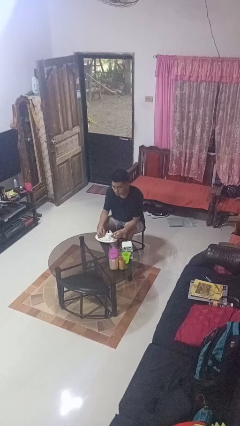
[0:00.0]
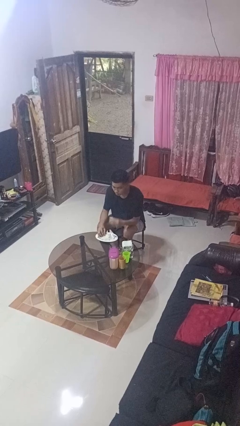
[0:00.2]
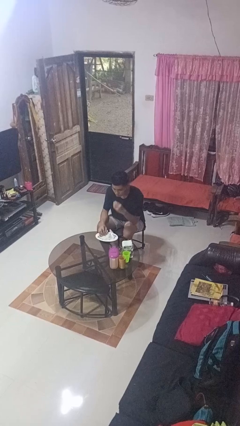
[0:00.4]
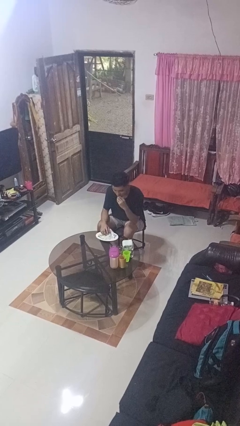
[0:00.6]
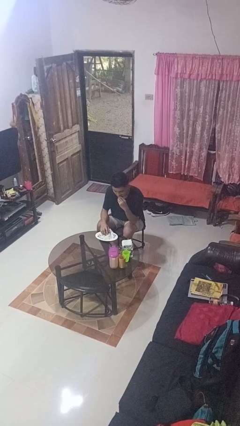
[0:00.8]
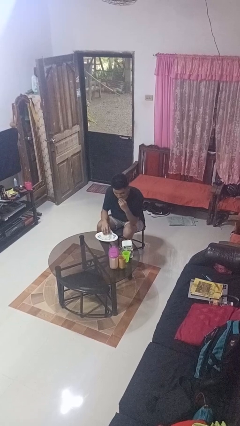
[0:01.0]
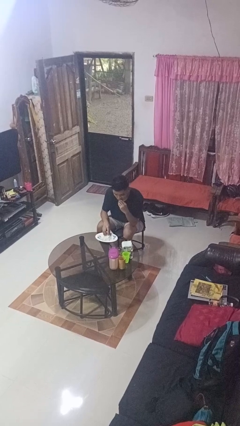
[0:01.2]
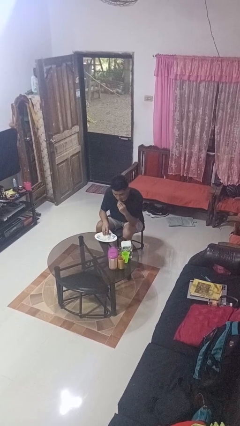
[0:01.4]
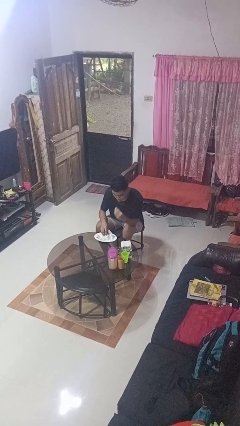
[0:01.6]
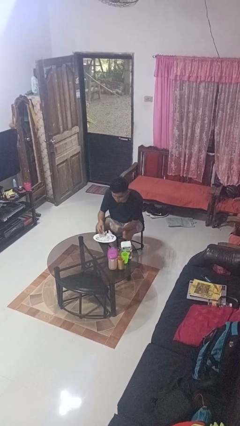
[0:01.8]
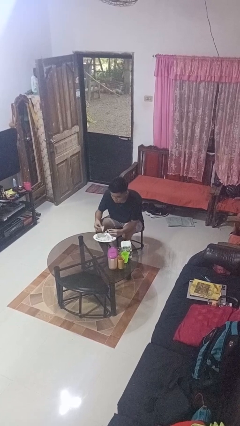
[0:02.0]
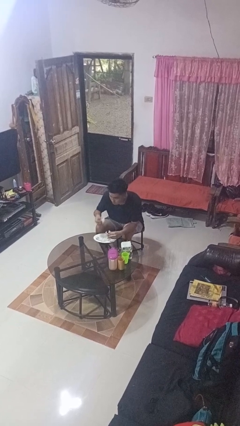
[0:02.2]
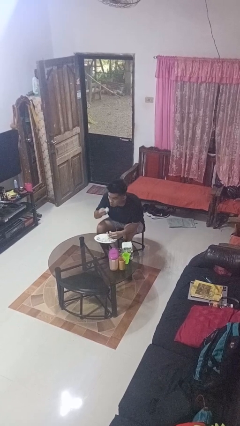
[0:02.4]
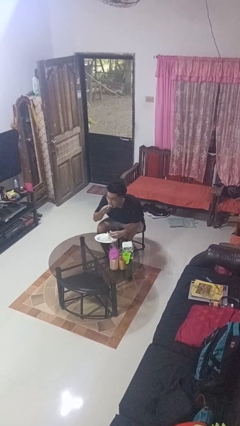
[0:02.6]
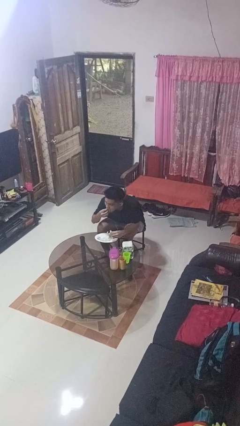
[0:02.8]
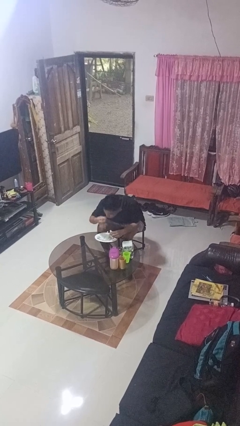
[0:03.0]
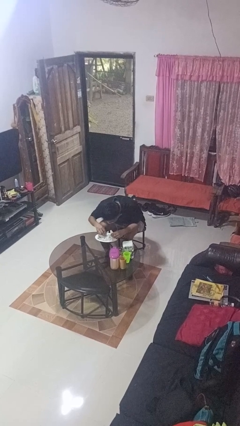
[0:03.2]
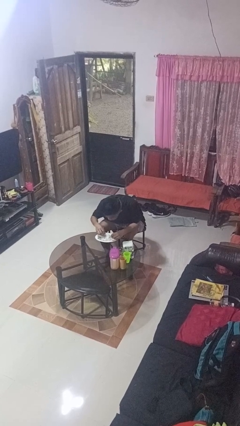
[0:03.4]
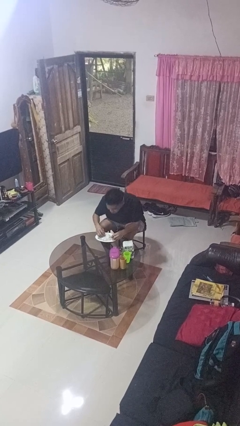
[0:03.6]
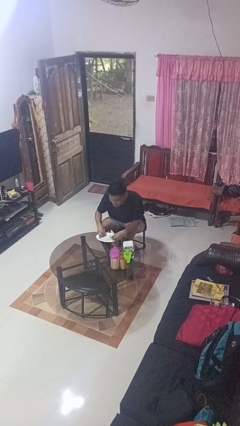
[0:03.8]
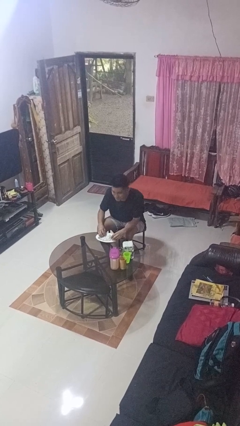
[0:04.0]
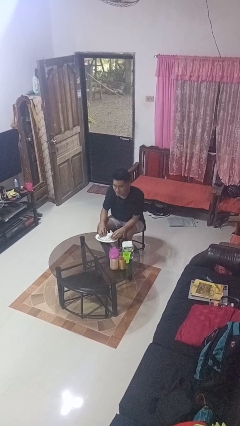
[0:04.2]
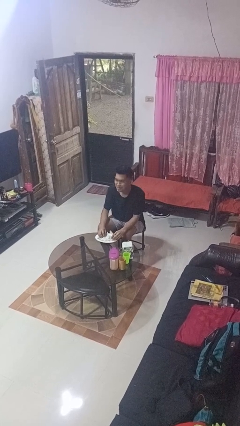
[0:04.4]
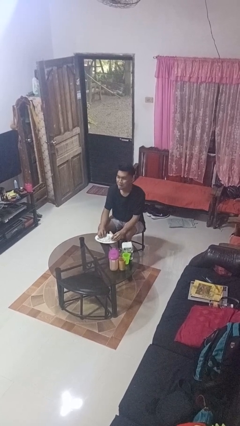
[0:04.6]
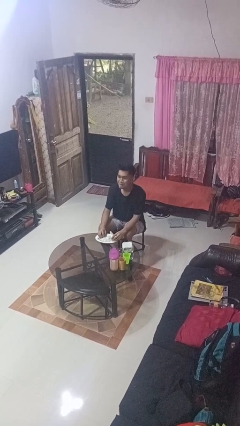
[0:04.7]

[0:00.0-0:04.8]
person eats with hands

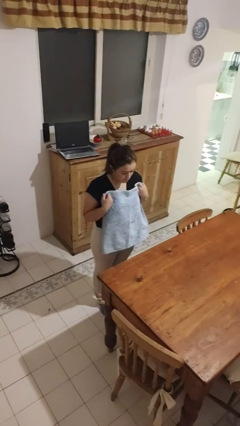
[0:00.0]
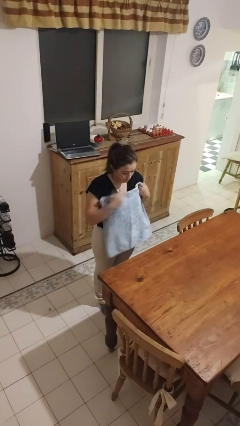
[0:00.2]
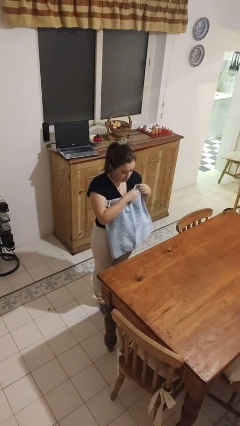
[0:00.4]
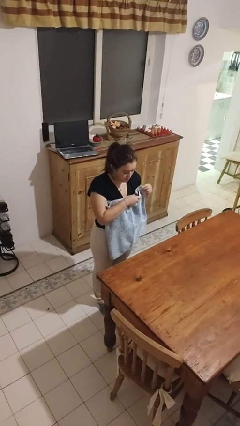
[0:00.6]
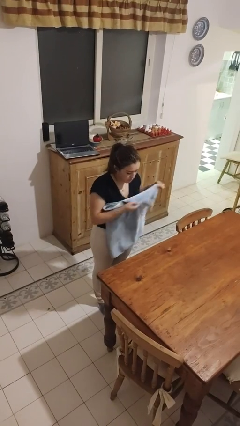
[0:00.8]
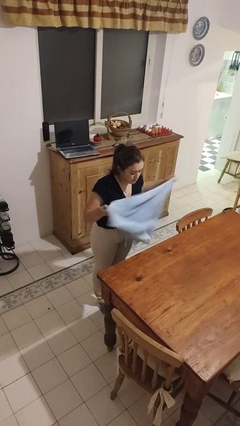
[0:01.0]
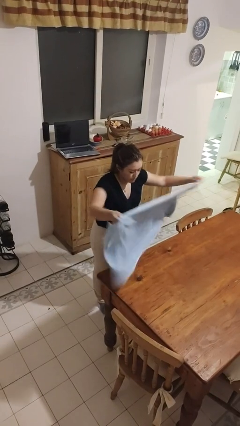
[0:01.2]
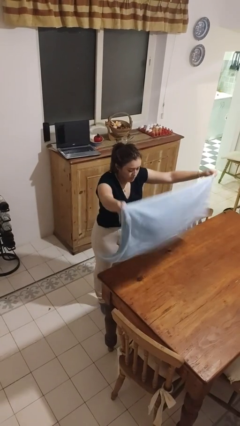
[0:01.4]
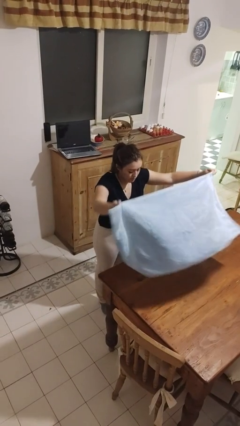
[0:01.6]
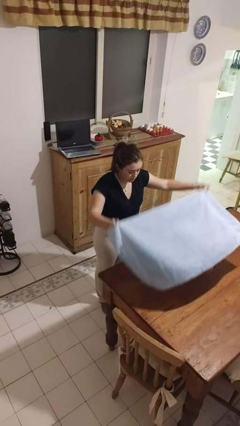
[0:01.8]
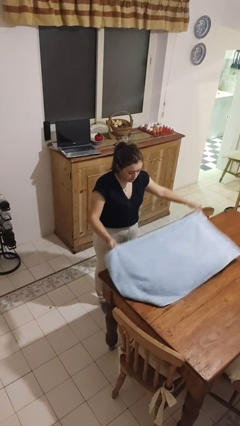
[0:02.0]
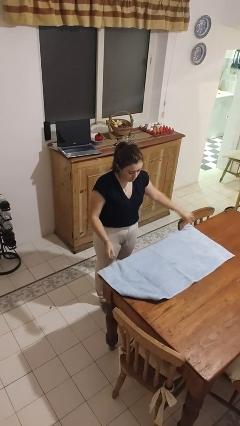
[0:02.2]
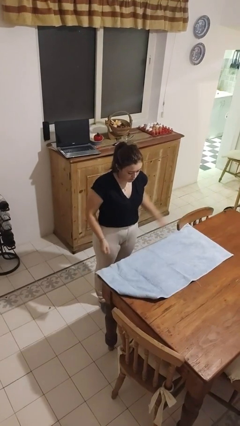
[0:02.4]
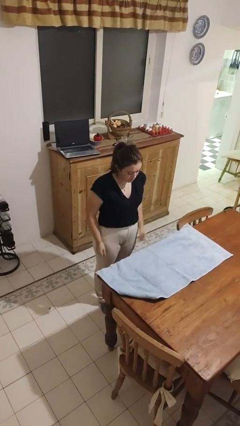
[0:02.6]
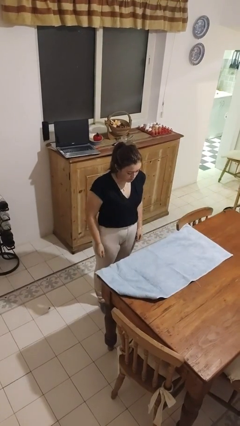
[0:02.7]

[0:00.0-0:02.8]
person spreads tablecloth

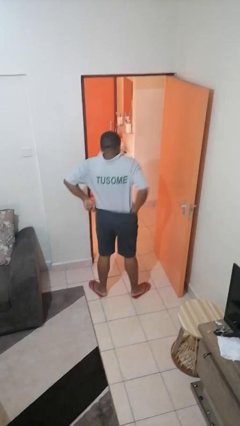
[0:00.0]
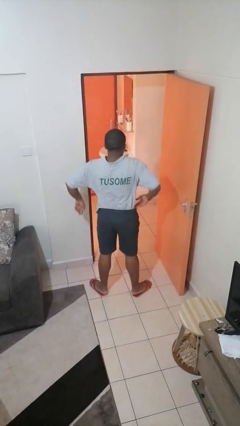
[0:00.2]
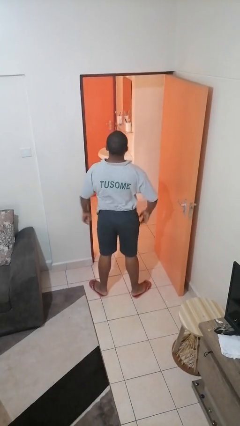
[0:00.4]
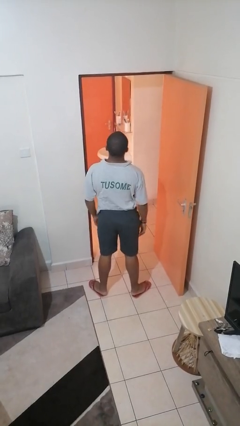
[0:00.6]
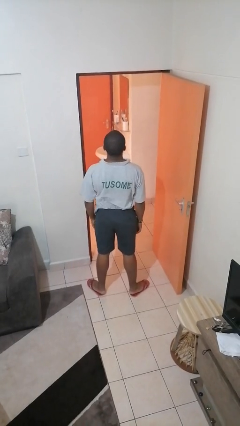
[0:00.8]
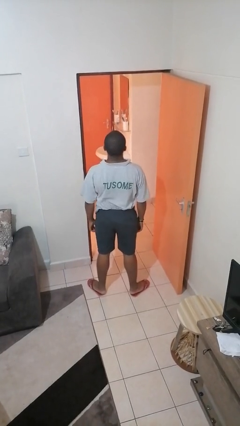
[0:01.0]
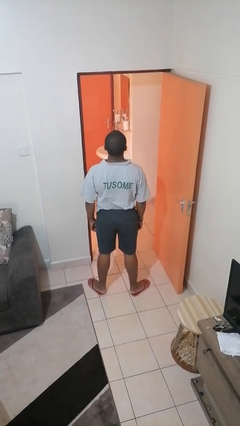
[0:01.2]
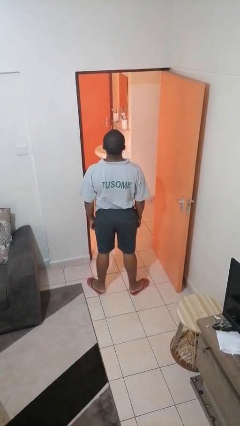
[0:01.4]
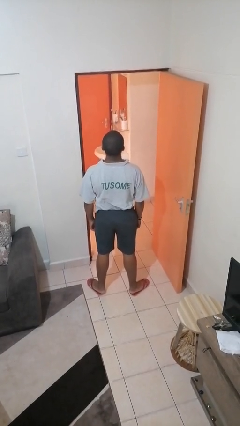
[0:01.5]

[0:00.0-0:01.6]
person tucks in shirt

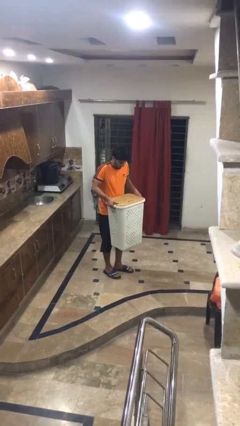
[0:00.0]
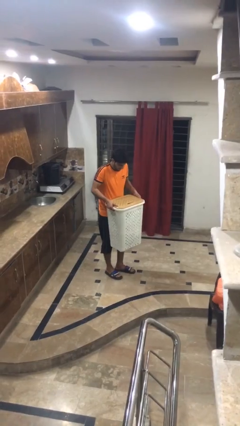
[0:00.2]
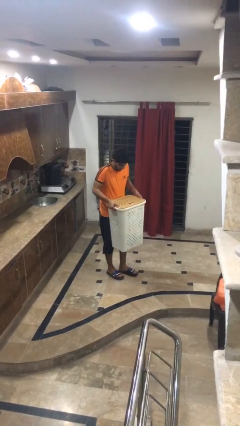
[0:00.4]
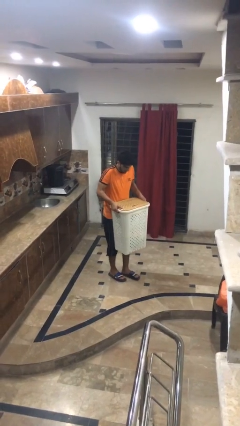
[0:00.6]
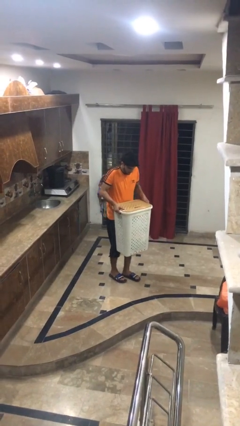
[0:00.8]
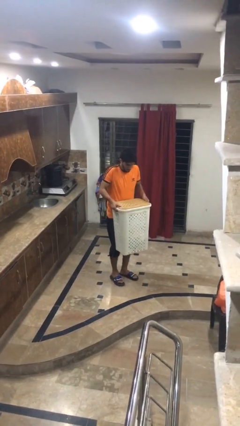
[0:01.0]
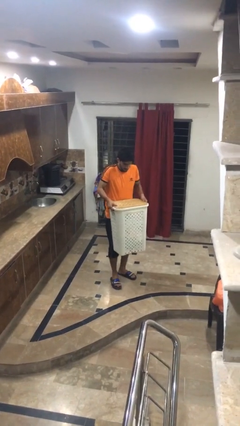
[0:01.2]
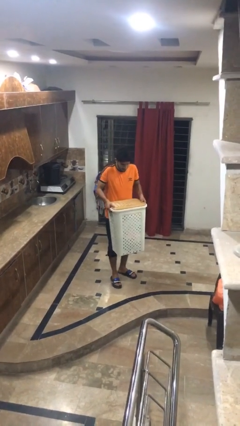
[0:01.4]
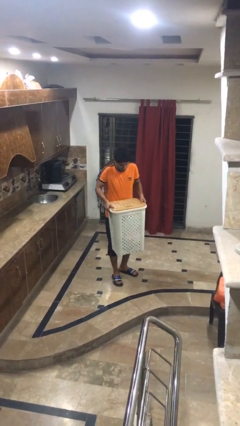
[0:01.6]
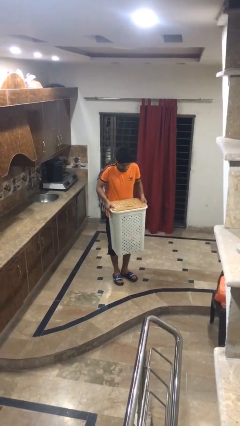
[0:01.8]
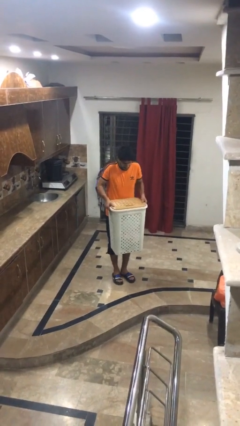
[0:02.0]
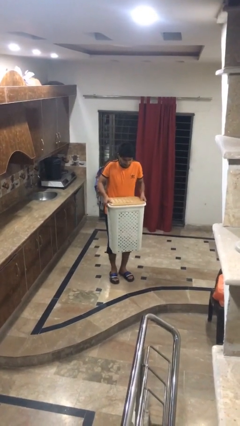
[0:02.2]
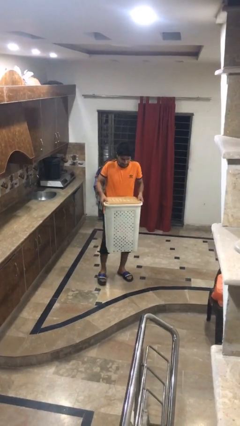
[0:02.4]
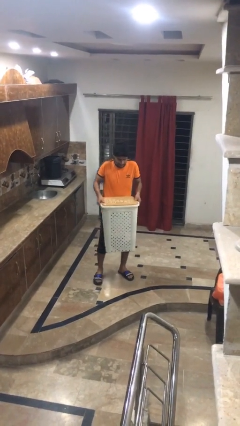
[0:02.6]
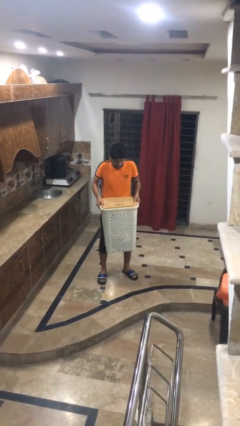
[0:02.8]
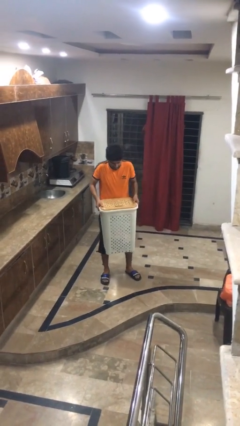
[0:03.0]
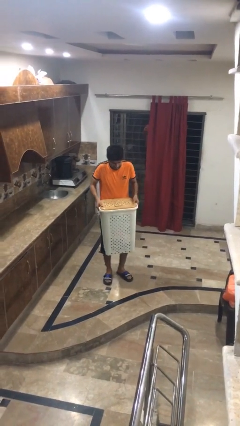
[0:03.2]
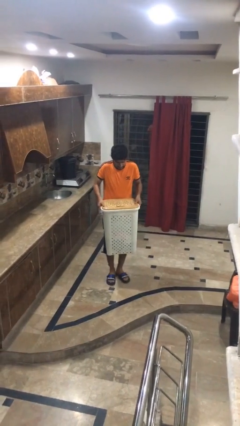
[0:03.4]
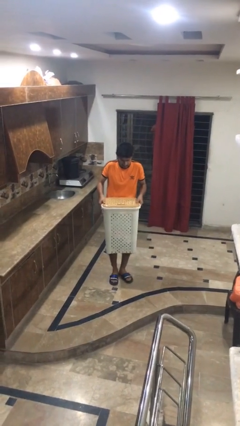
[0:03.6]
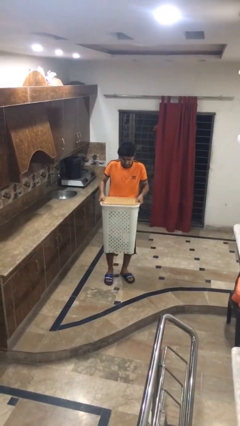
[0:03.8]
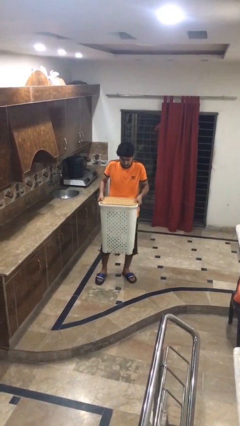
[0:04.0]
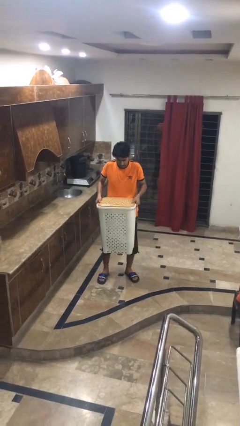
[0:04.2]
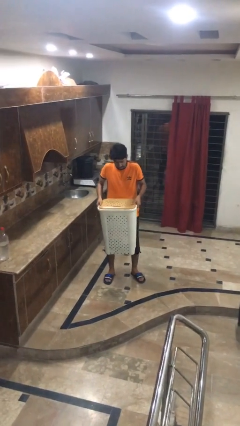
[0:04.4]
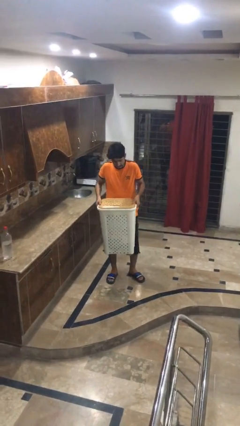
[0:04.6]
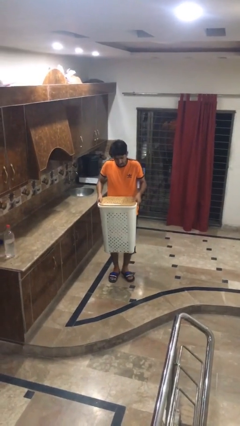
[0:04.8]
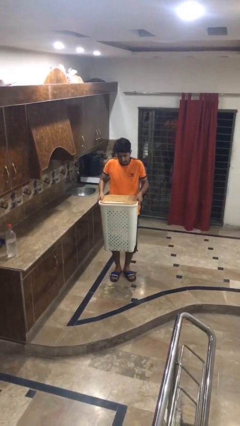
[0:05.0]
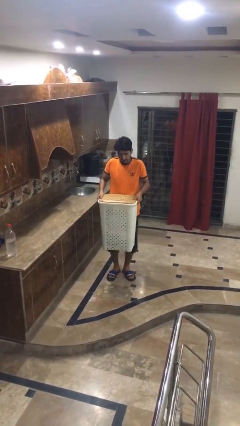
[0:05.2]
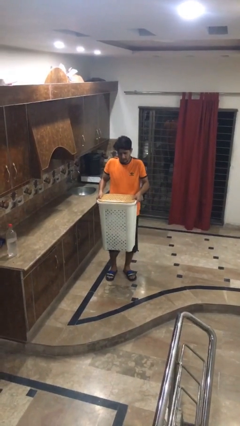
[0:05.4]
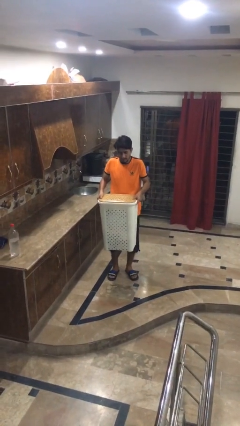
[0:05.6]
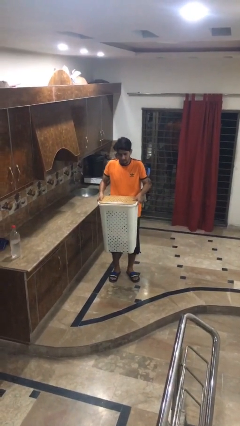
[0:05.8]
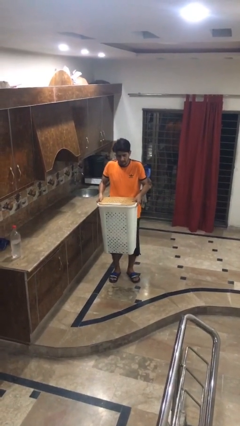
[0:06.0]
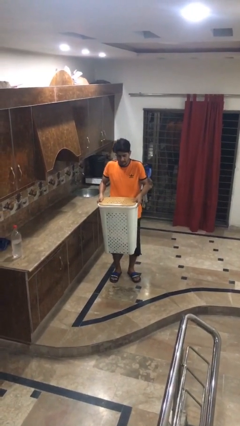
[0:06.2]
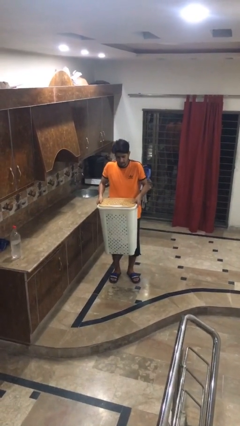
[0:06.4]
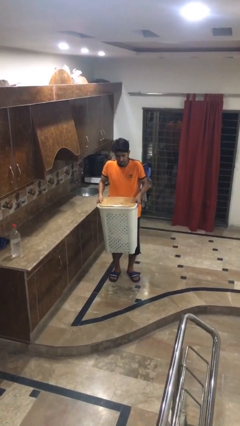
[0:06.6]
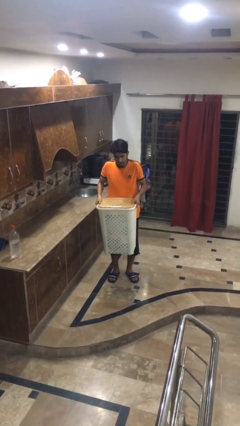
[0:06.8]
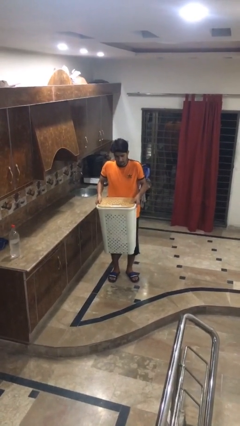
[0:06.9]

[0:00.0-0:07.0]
person carries laundry basket

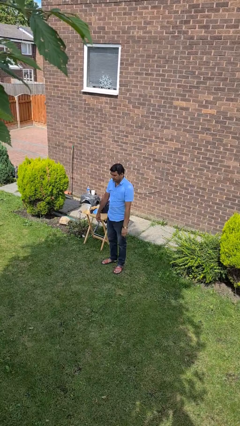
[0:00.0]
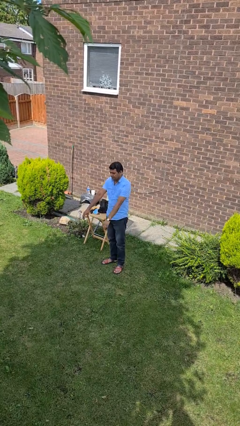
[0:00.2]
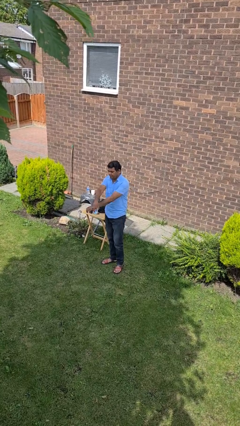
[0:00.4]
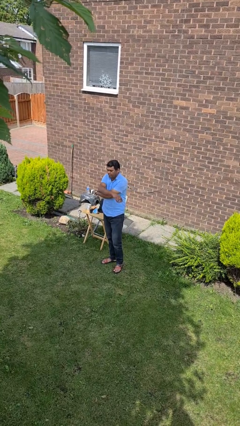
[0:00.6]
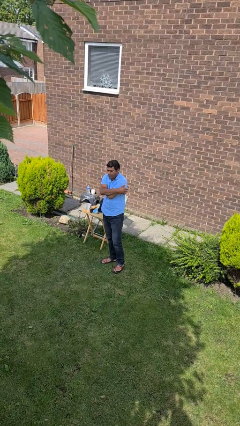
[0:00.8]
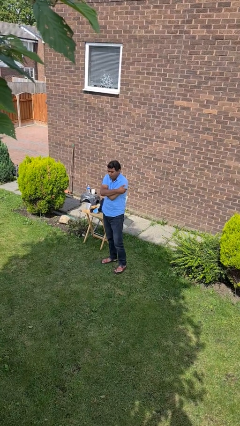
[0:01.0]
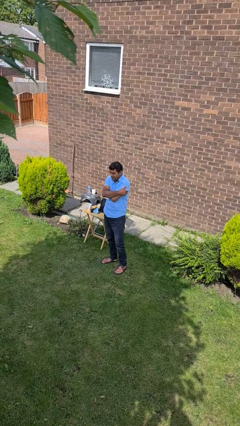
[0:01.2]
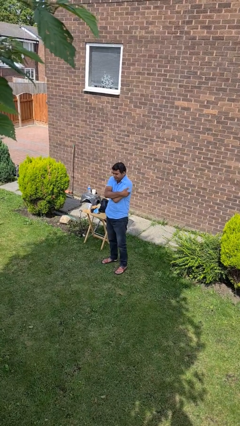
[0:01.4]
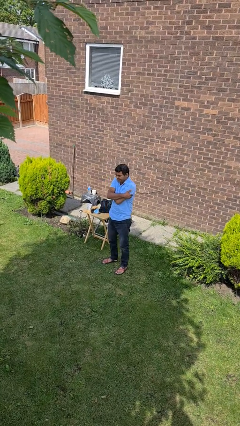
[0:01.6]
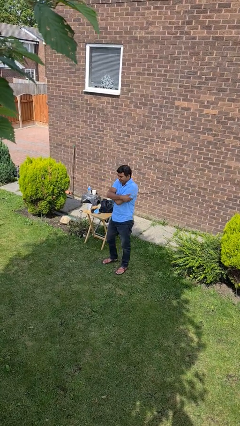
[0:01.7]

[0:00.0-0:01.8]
person crosses arms
